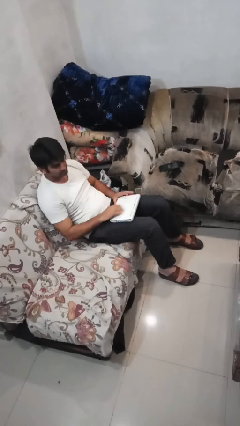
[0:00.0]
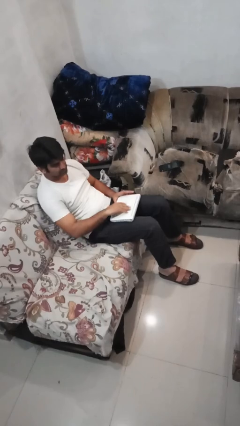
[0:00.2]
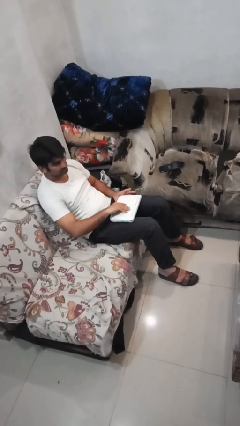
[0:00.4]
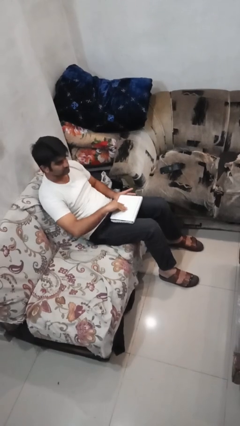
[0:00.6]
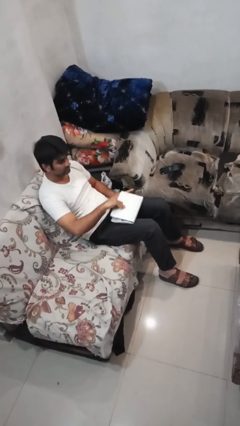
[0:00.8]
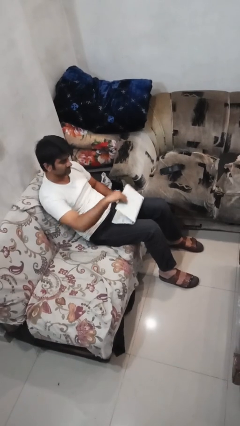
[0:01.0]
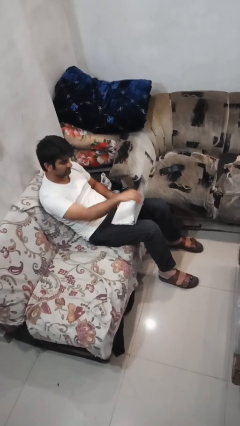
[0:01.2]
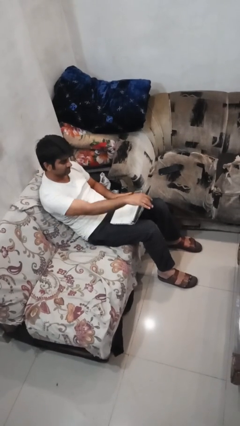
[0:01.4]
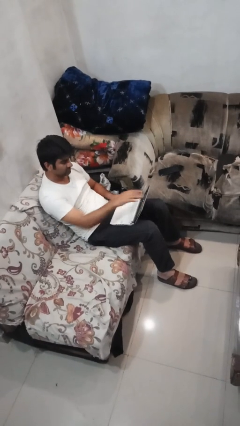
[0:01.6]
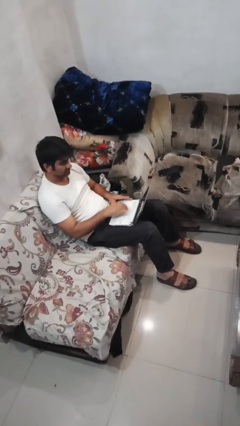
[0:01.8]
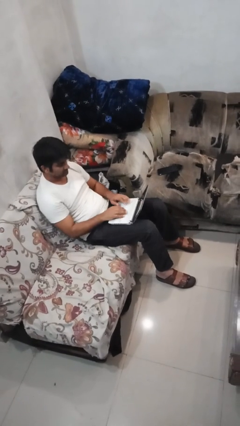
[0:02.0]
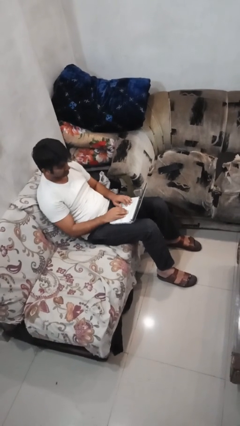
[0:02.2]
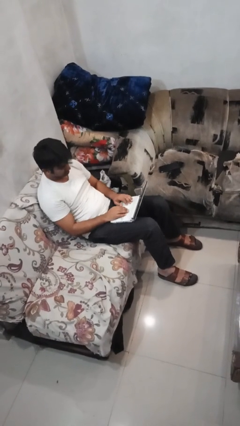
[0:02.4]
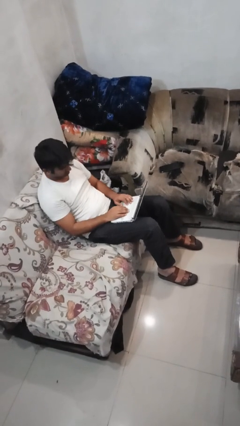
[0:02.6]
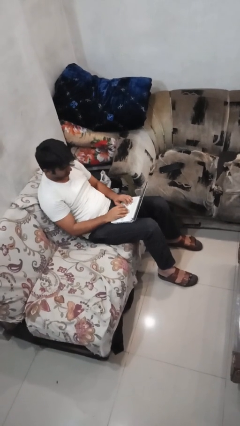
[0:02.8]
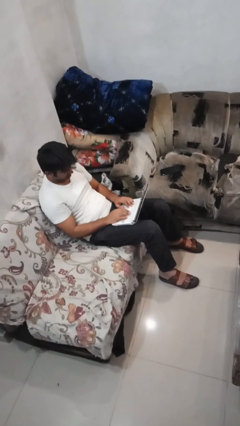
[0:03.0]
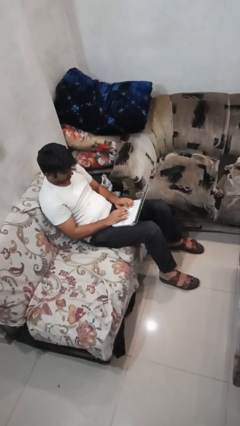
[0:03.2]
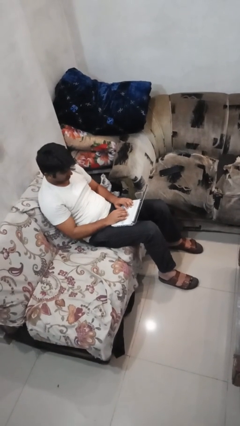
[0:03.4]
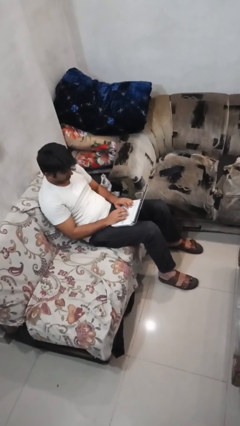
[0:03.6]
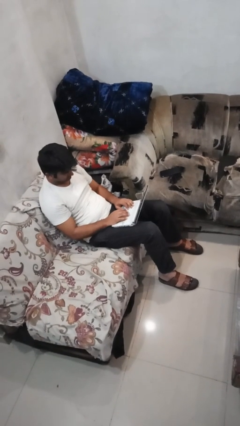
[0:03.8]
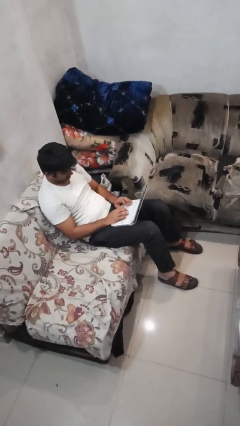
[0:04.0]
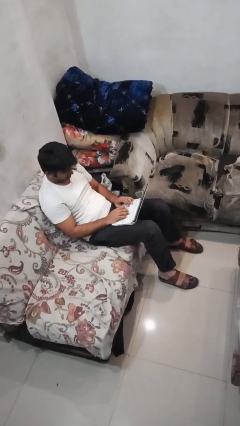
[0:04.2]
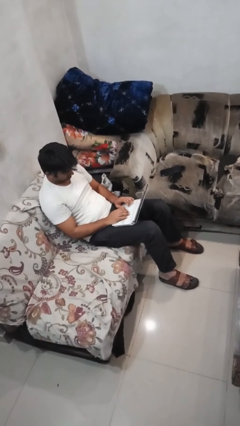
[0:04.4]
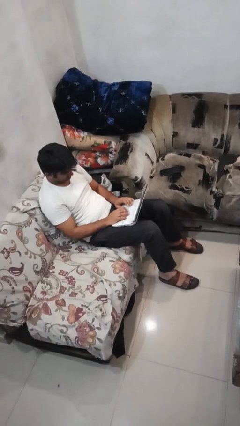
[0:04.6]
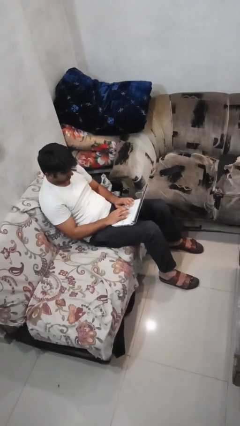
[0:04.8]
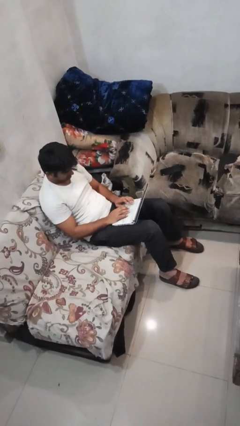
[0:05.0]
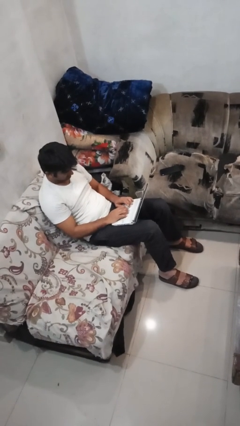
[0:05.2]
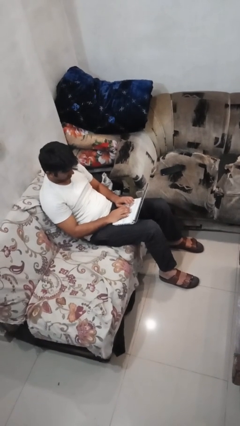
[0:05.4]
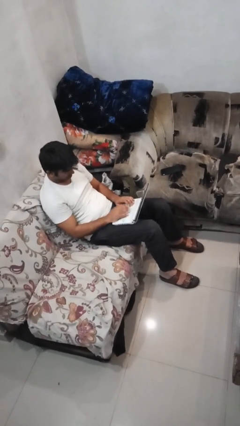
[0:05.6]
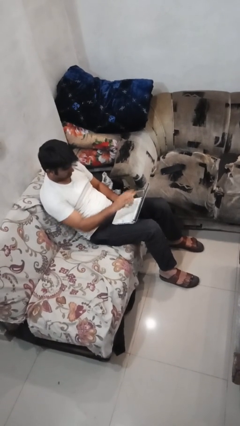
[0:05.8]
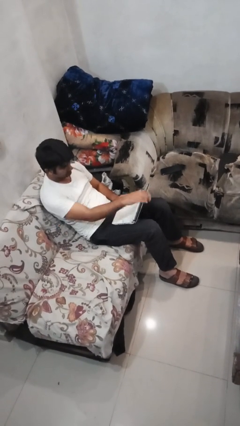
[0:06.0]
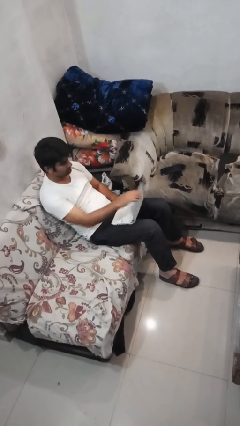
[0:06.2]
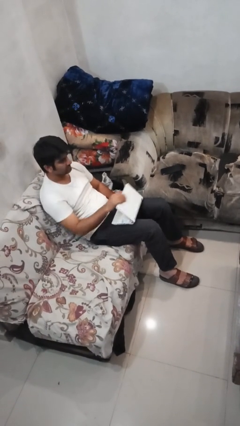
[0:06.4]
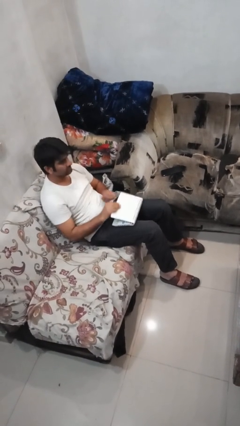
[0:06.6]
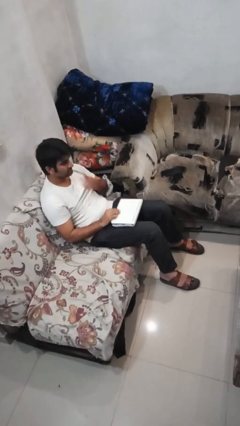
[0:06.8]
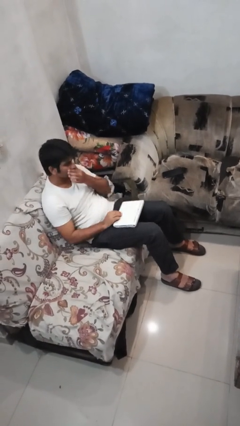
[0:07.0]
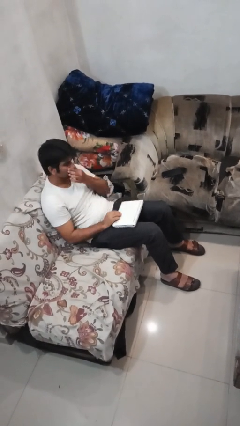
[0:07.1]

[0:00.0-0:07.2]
person interacts with laptop

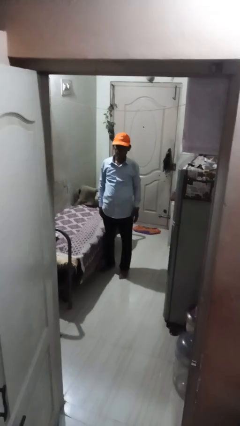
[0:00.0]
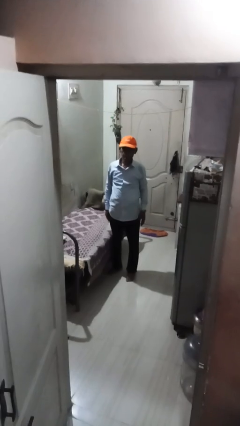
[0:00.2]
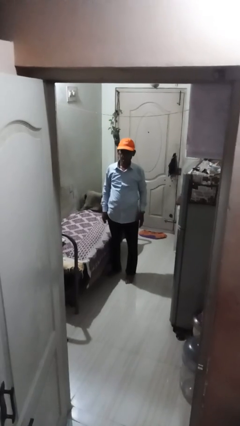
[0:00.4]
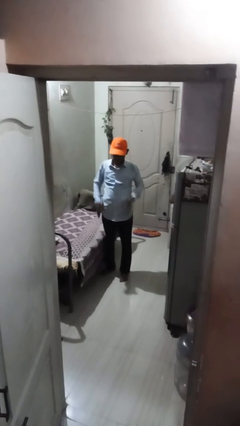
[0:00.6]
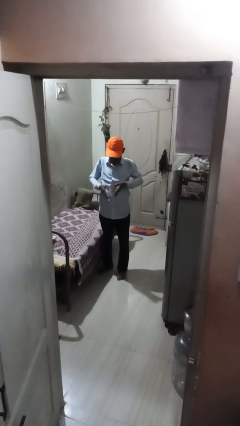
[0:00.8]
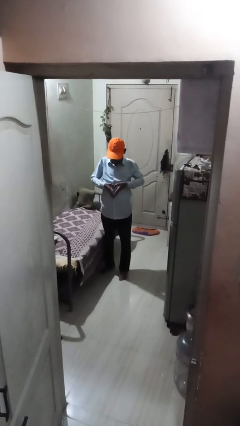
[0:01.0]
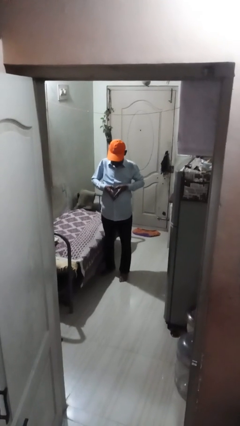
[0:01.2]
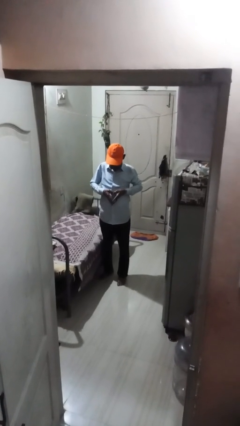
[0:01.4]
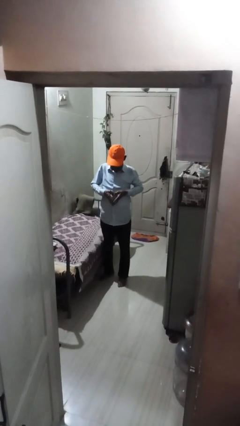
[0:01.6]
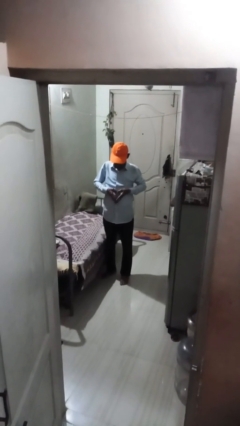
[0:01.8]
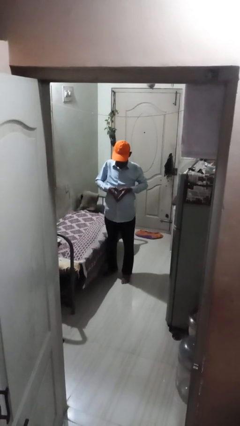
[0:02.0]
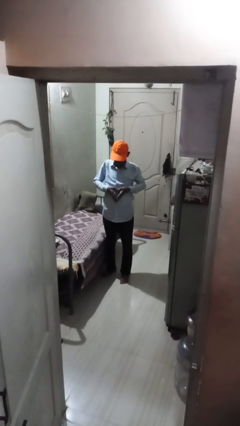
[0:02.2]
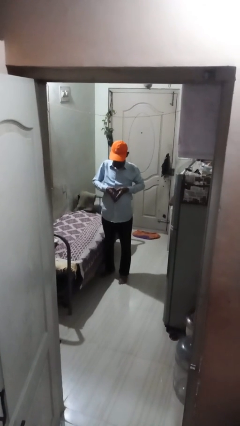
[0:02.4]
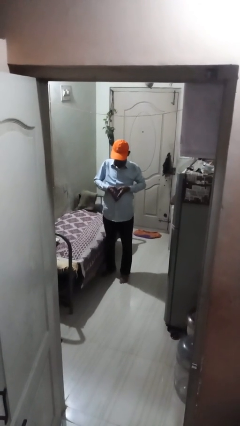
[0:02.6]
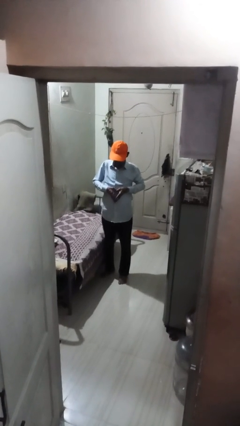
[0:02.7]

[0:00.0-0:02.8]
person gestures heart

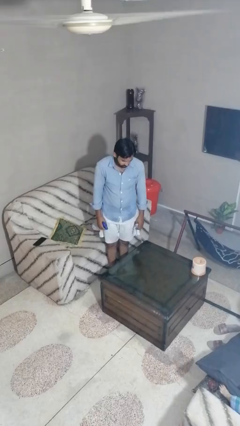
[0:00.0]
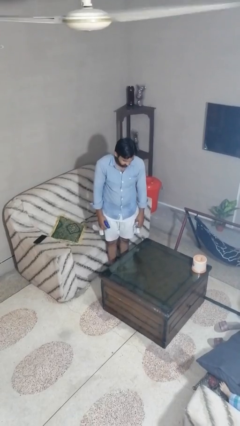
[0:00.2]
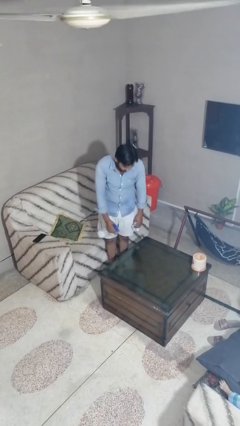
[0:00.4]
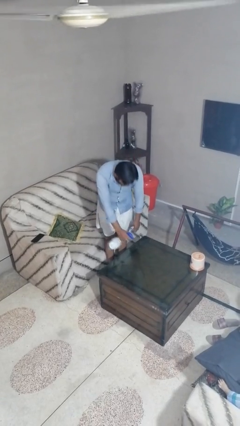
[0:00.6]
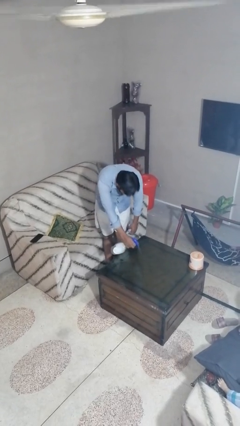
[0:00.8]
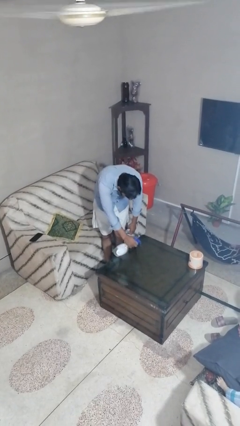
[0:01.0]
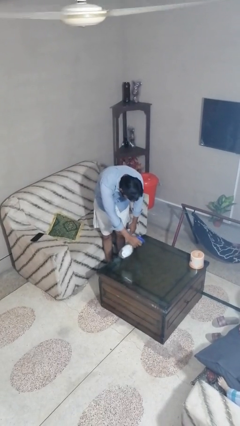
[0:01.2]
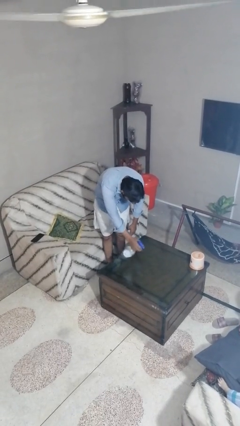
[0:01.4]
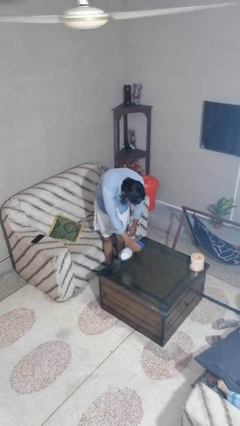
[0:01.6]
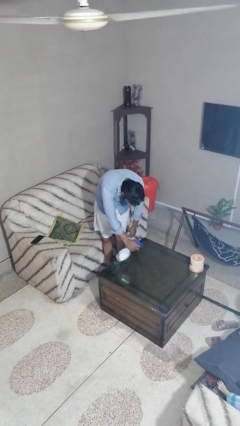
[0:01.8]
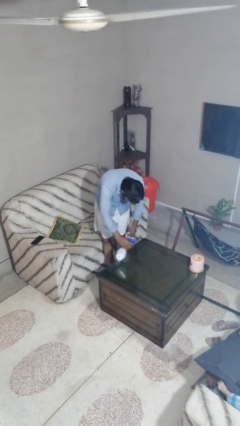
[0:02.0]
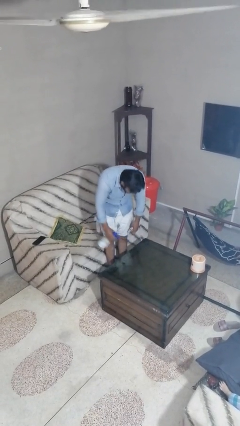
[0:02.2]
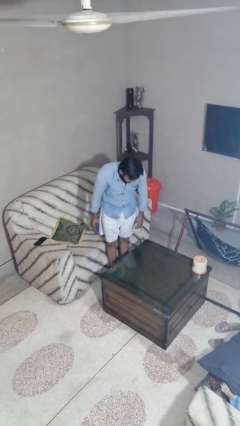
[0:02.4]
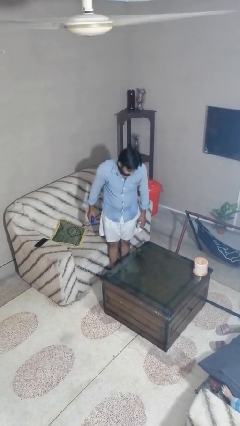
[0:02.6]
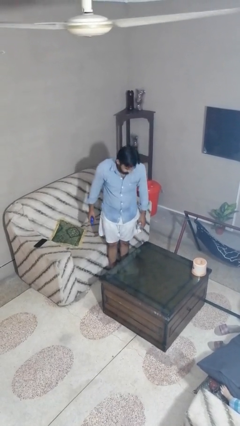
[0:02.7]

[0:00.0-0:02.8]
person sprays from bottle

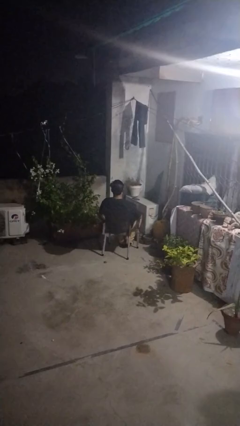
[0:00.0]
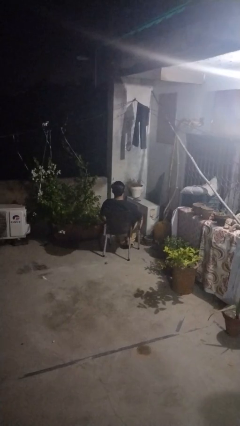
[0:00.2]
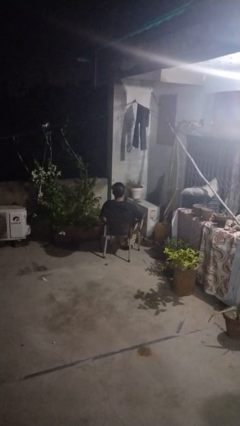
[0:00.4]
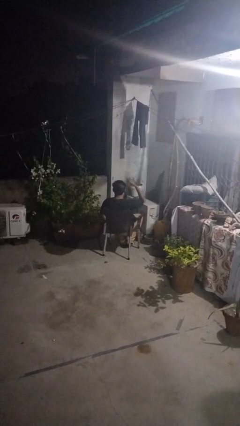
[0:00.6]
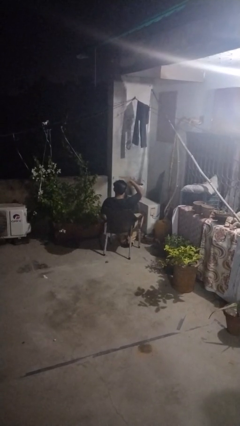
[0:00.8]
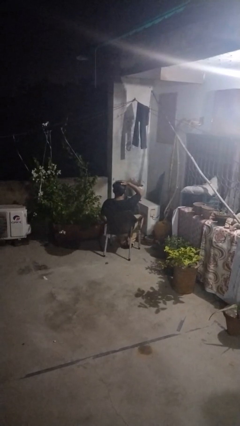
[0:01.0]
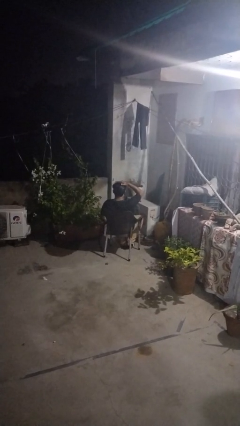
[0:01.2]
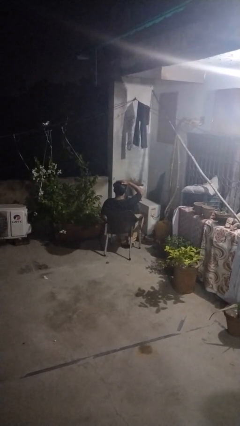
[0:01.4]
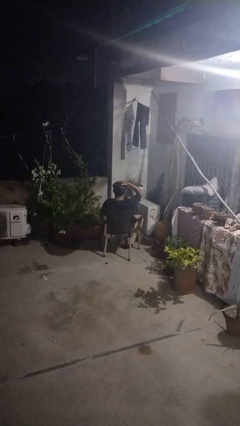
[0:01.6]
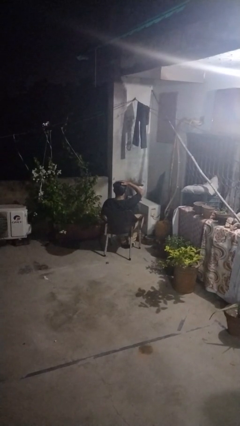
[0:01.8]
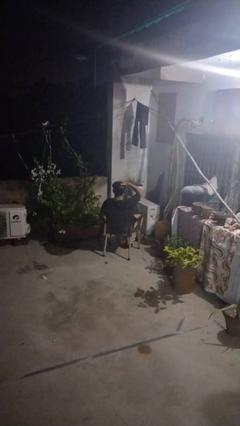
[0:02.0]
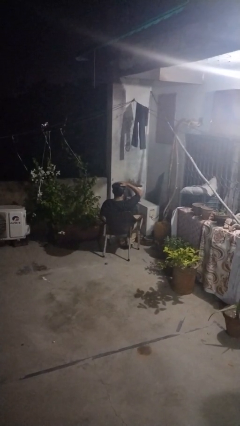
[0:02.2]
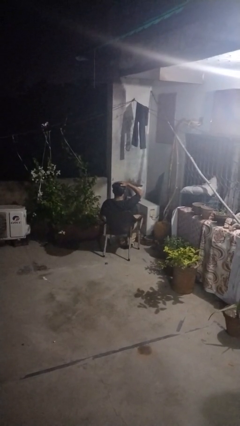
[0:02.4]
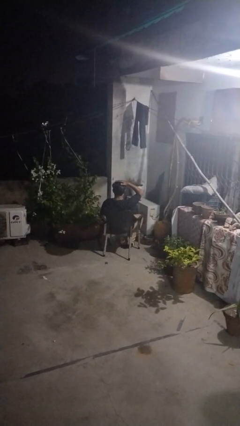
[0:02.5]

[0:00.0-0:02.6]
person pats head

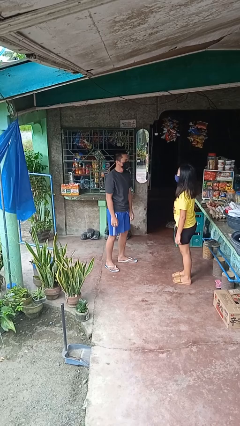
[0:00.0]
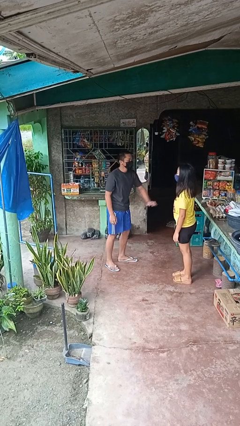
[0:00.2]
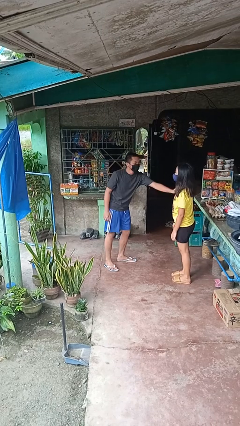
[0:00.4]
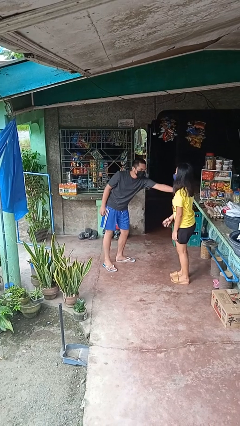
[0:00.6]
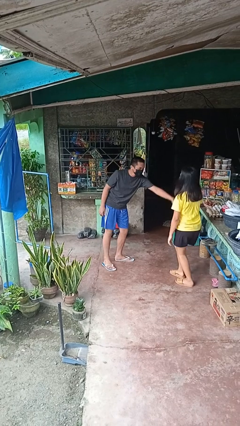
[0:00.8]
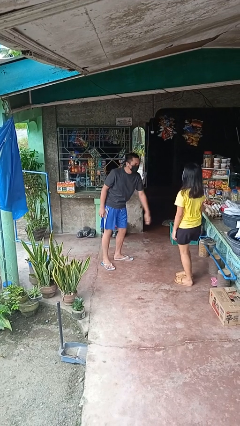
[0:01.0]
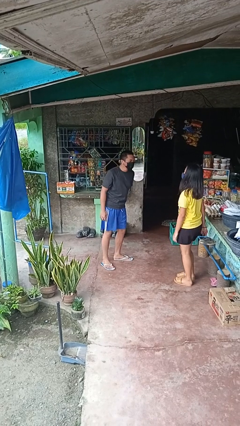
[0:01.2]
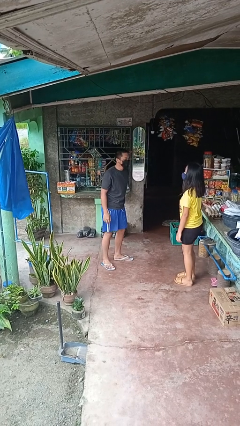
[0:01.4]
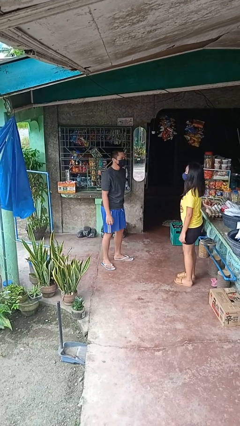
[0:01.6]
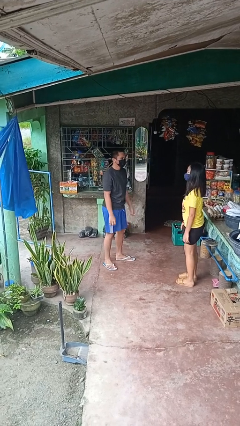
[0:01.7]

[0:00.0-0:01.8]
person shoves person
